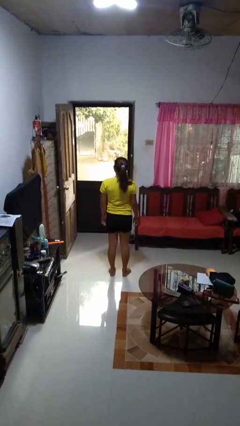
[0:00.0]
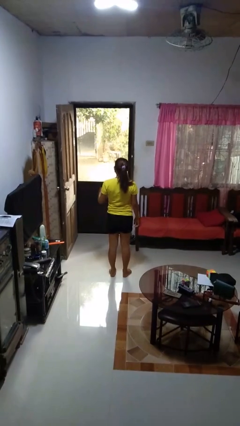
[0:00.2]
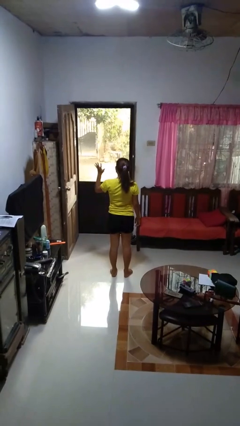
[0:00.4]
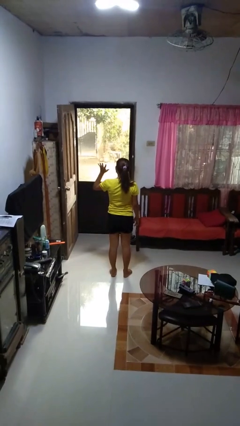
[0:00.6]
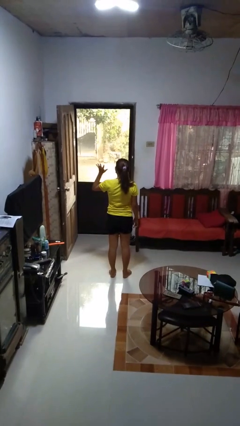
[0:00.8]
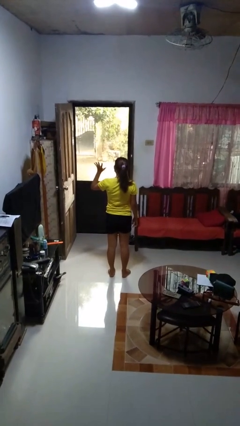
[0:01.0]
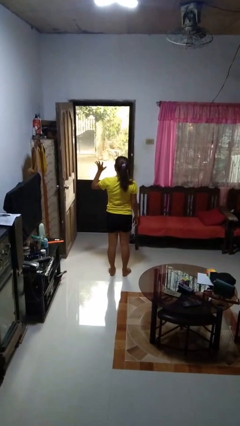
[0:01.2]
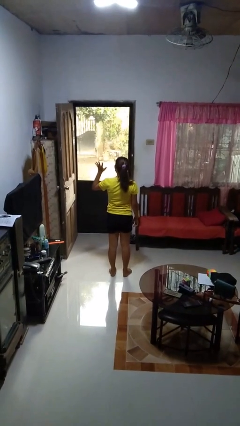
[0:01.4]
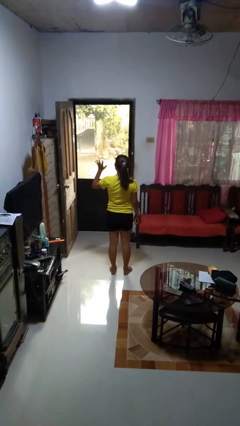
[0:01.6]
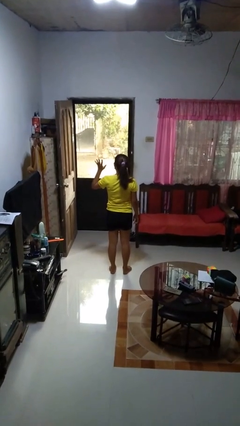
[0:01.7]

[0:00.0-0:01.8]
person gestures number five

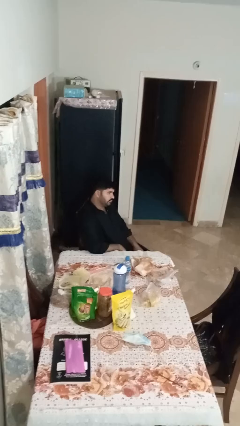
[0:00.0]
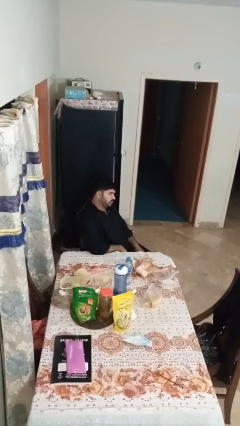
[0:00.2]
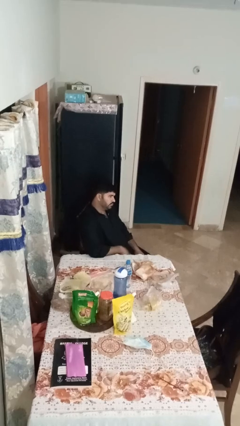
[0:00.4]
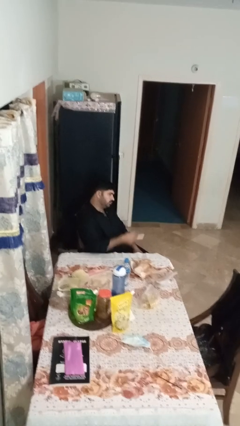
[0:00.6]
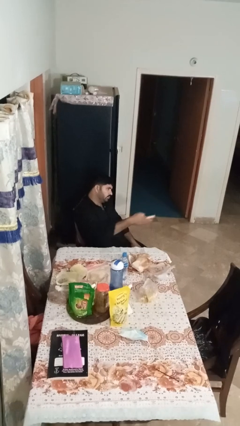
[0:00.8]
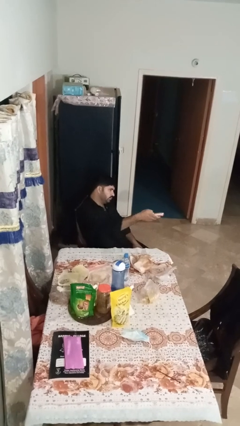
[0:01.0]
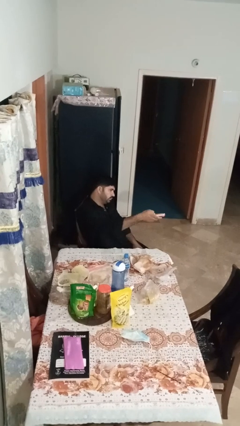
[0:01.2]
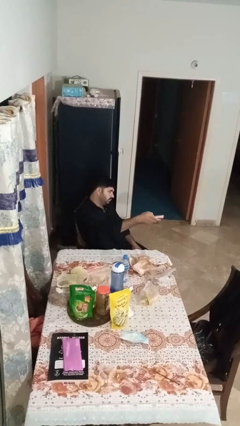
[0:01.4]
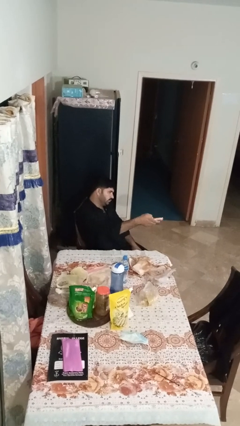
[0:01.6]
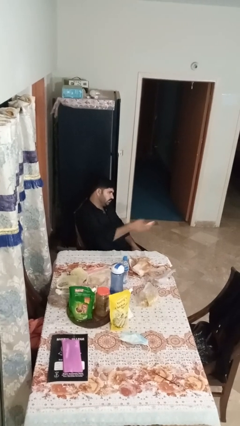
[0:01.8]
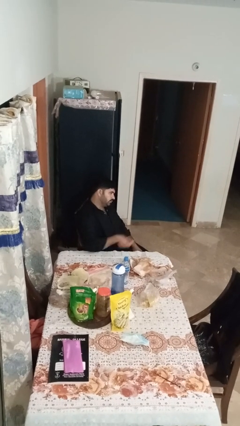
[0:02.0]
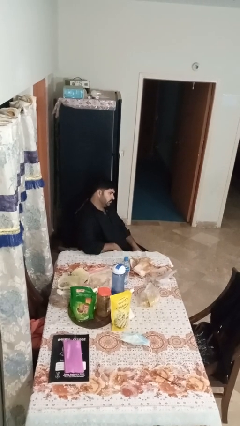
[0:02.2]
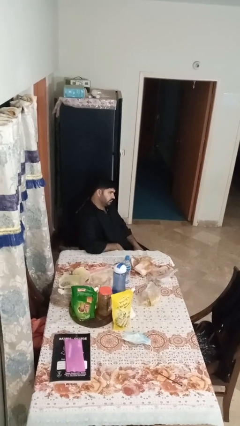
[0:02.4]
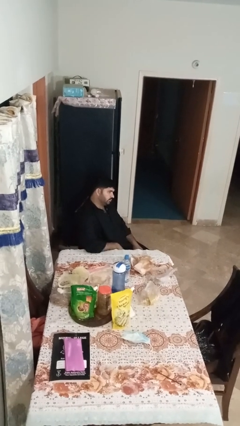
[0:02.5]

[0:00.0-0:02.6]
person uses television remote

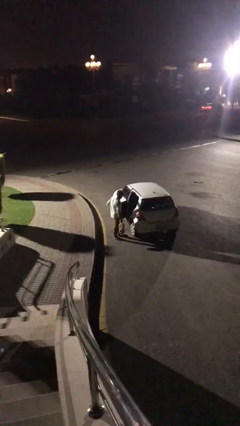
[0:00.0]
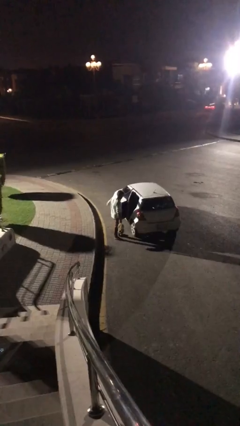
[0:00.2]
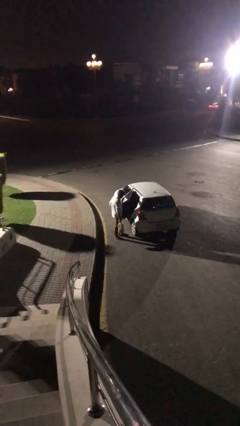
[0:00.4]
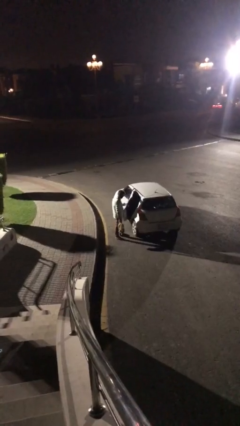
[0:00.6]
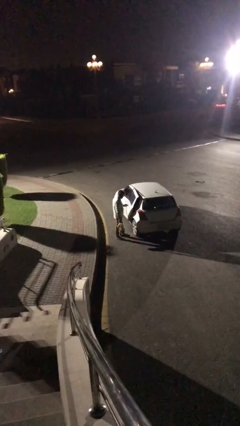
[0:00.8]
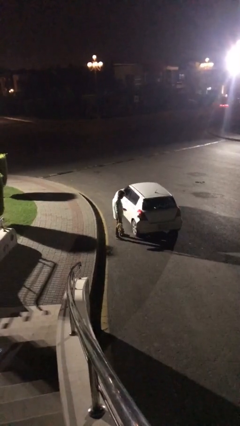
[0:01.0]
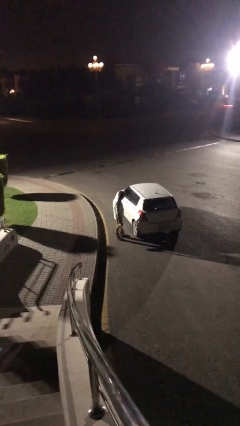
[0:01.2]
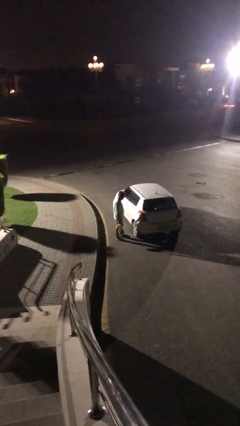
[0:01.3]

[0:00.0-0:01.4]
person closes car door

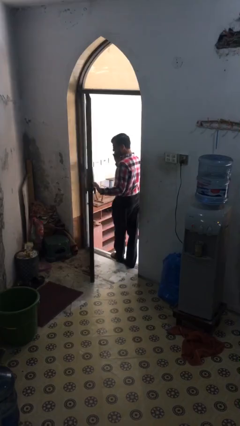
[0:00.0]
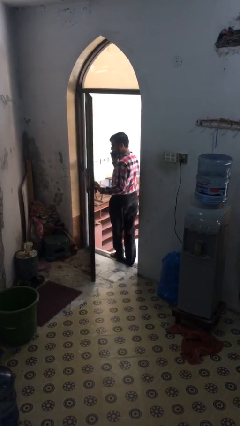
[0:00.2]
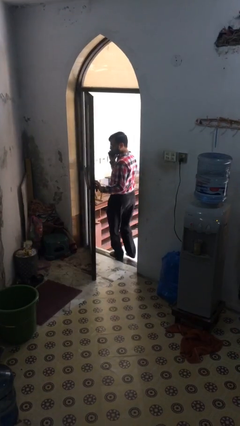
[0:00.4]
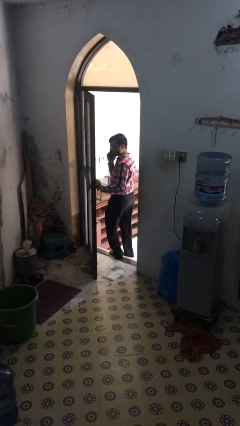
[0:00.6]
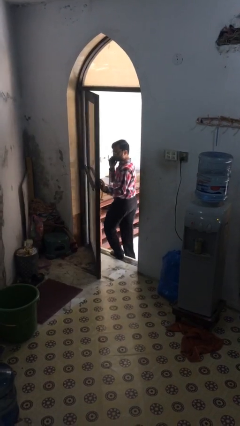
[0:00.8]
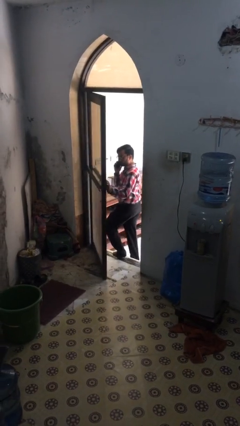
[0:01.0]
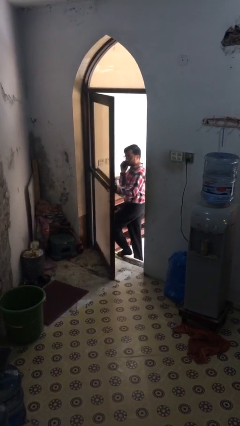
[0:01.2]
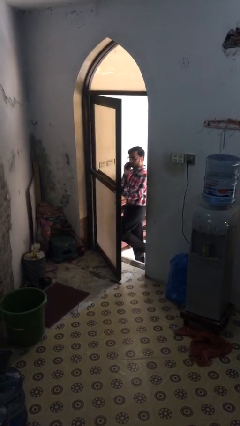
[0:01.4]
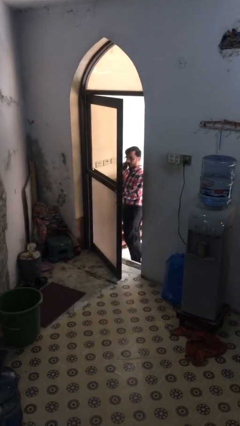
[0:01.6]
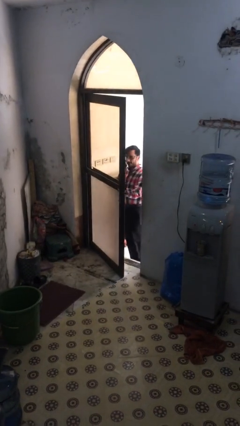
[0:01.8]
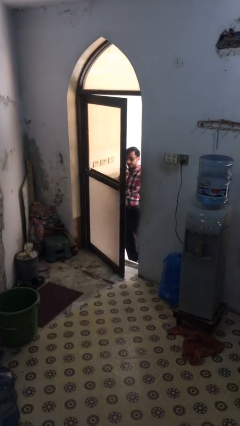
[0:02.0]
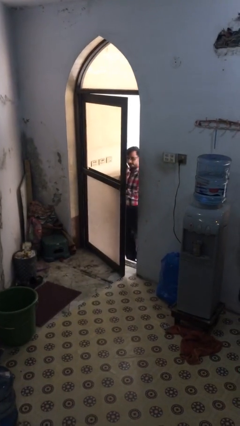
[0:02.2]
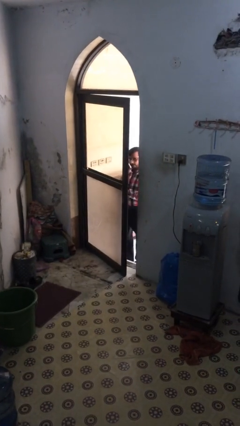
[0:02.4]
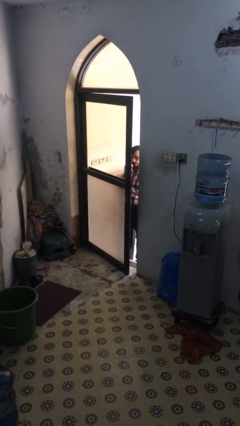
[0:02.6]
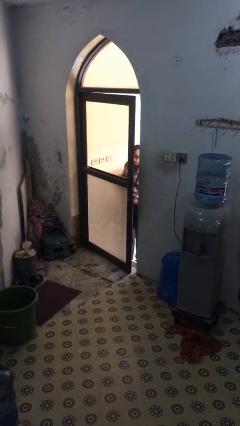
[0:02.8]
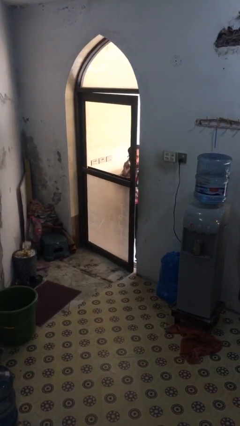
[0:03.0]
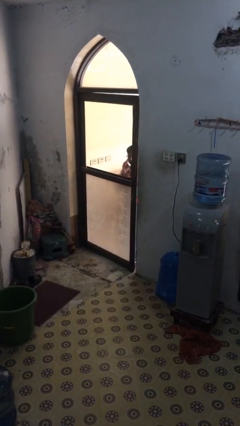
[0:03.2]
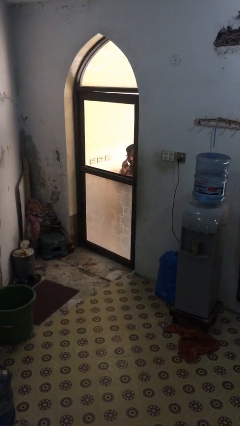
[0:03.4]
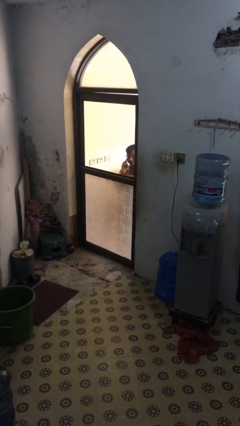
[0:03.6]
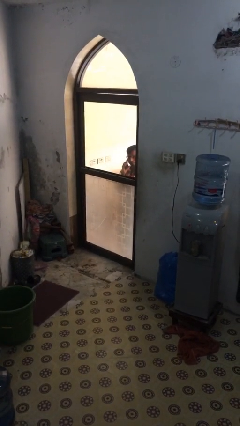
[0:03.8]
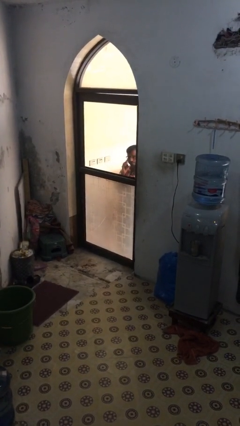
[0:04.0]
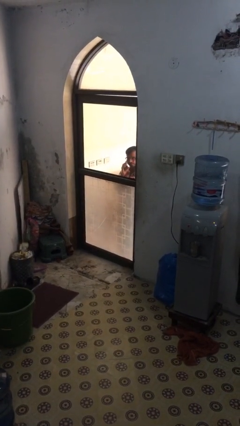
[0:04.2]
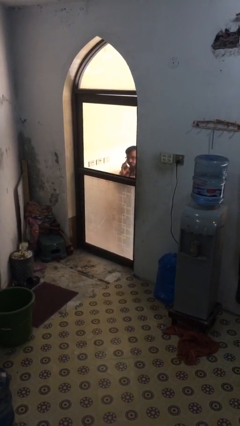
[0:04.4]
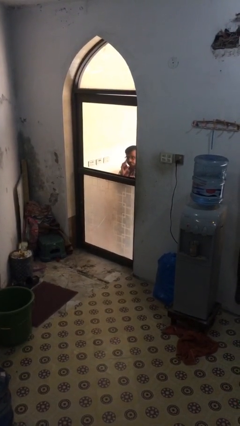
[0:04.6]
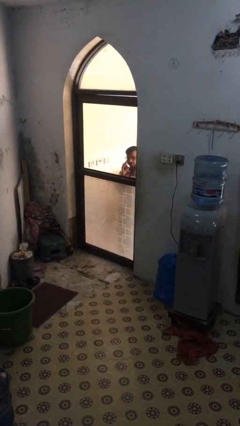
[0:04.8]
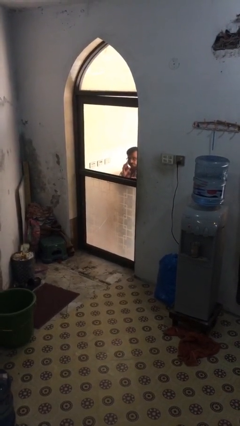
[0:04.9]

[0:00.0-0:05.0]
person closes facility door

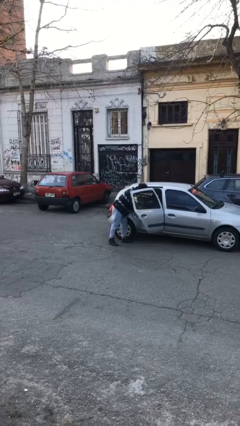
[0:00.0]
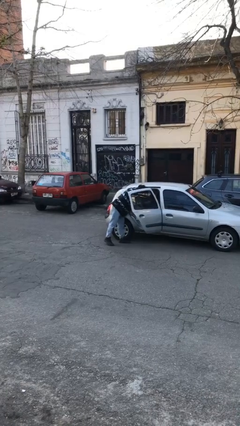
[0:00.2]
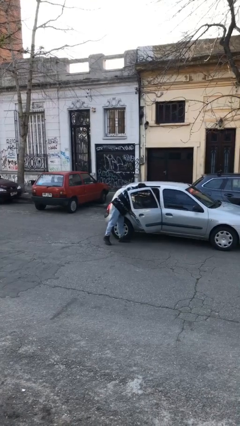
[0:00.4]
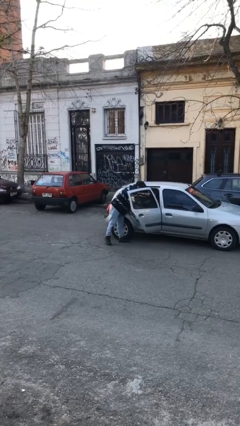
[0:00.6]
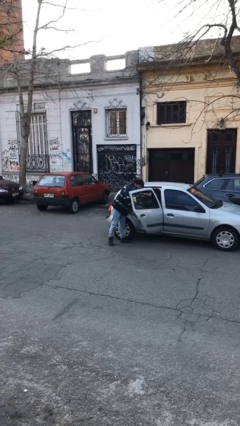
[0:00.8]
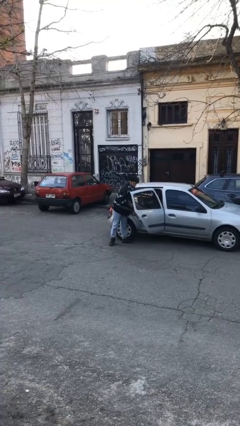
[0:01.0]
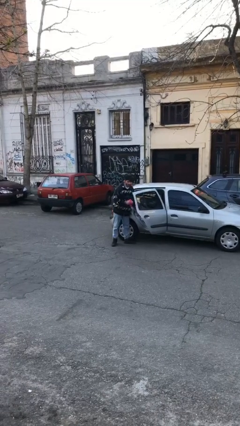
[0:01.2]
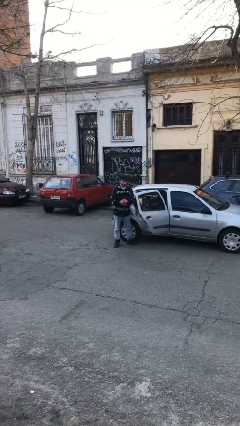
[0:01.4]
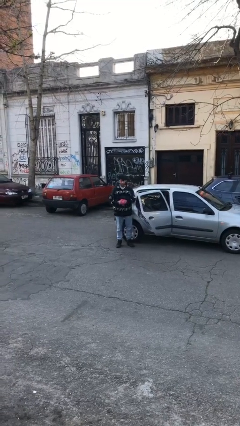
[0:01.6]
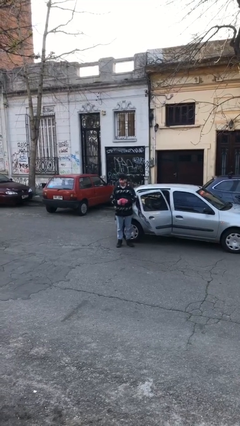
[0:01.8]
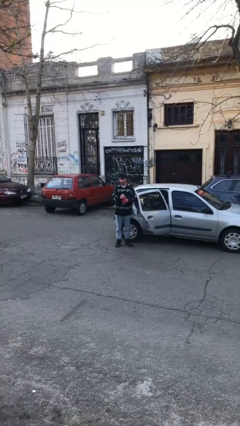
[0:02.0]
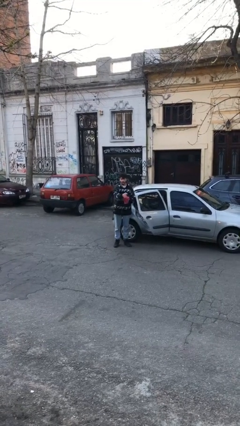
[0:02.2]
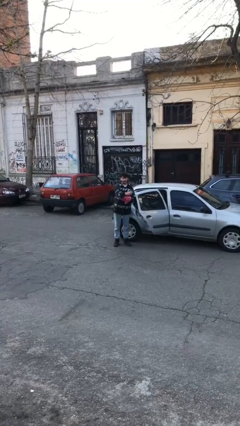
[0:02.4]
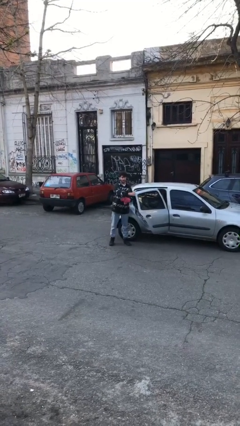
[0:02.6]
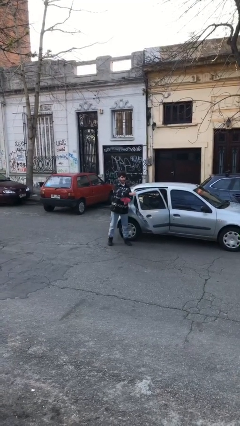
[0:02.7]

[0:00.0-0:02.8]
person unloads car

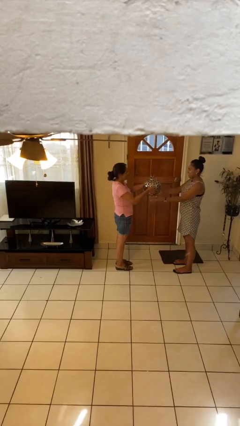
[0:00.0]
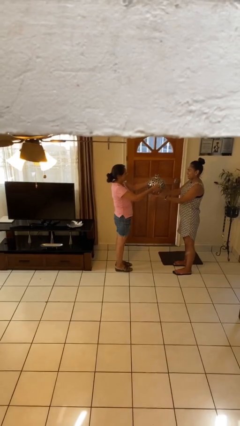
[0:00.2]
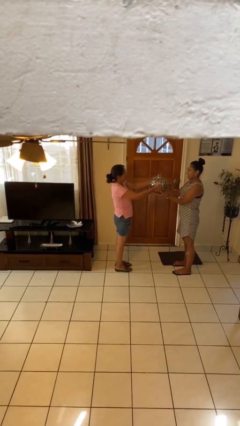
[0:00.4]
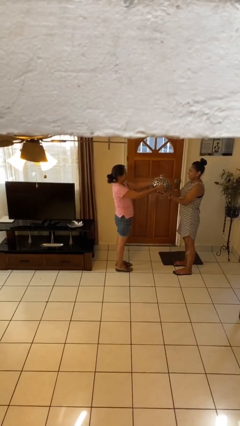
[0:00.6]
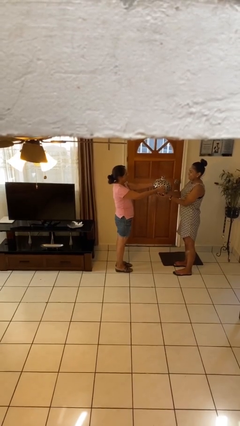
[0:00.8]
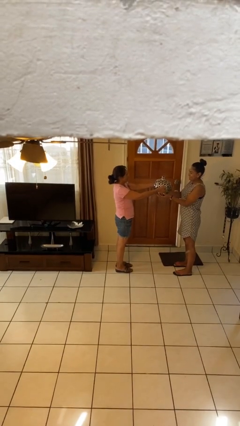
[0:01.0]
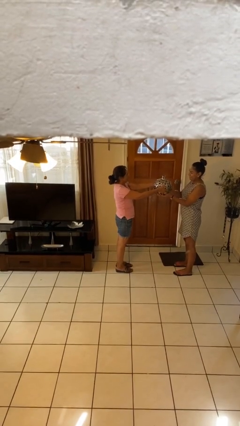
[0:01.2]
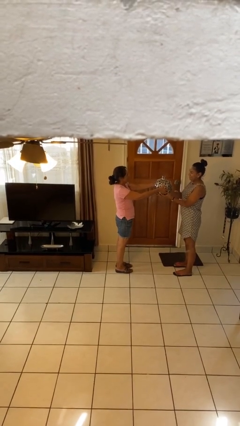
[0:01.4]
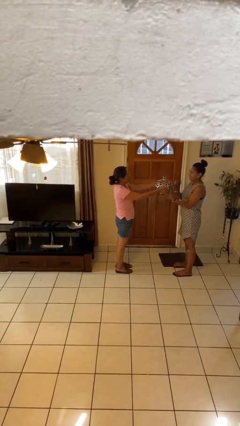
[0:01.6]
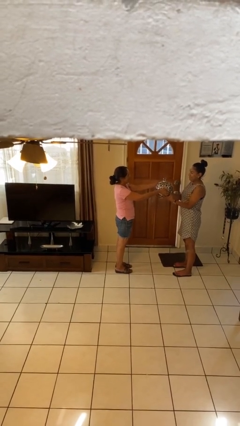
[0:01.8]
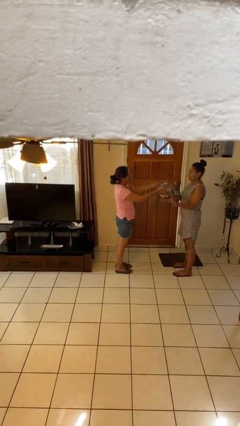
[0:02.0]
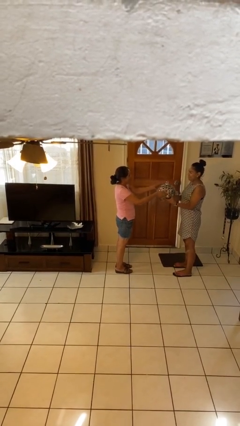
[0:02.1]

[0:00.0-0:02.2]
person transfers object to person

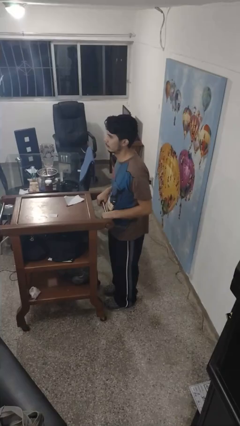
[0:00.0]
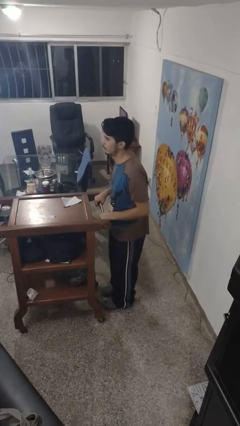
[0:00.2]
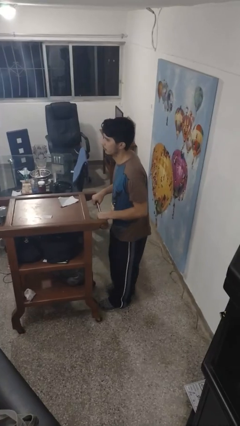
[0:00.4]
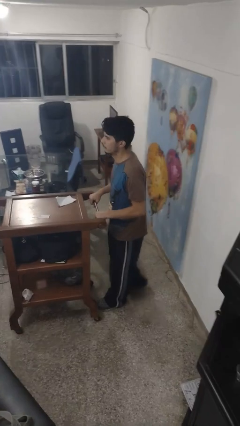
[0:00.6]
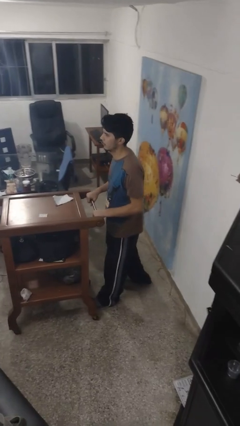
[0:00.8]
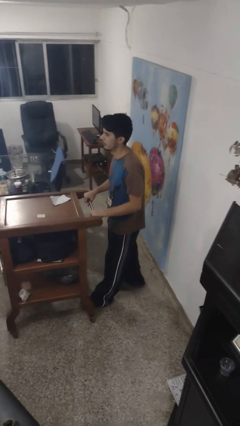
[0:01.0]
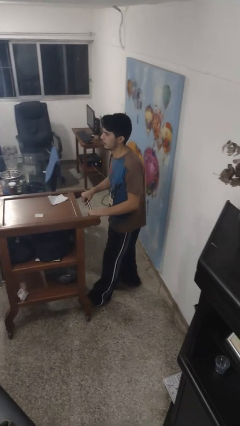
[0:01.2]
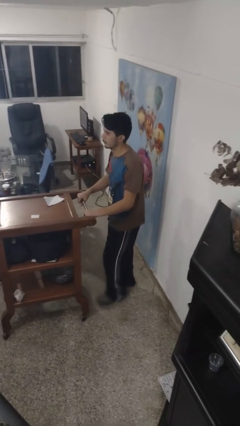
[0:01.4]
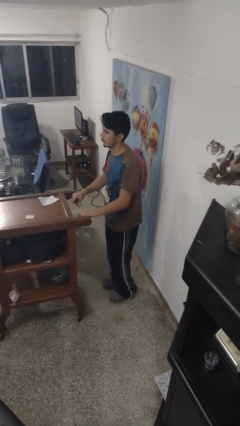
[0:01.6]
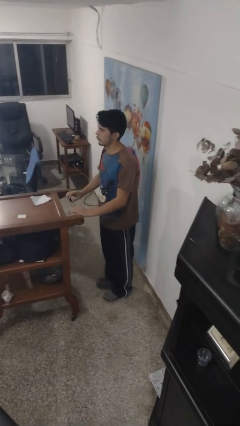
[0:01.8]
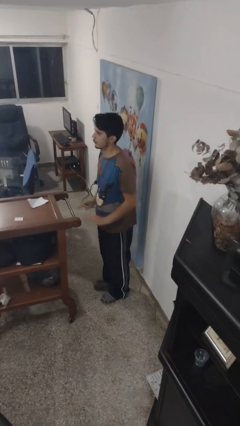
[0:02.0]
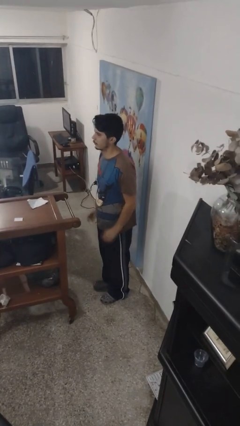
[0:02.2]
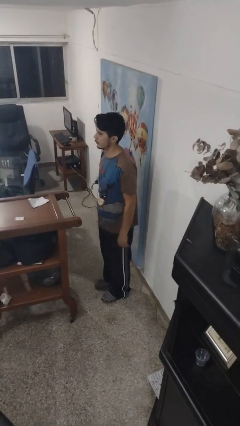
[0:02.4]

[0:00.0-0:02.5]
person pulls wheeled cart
